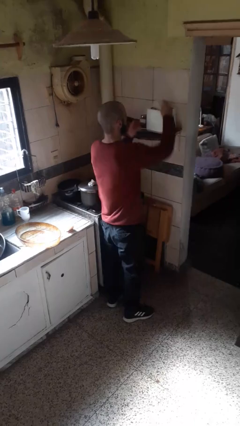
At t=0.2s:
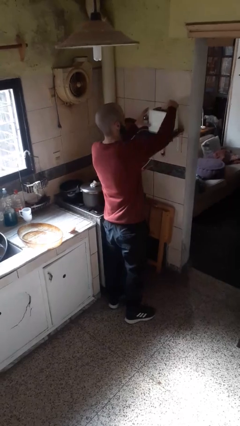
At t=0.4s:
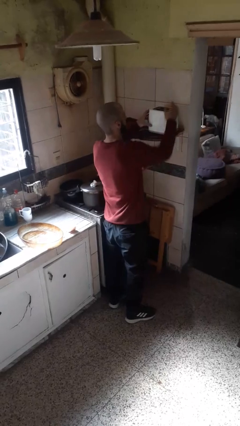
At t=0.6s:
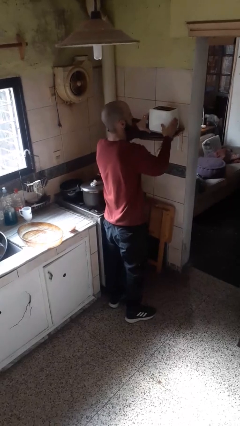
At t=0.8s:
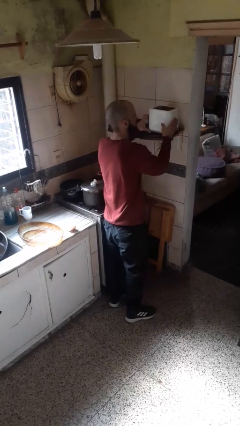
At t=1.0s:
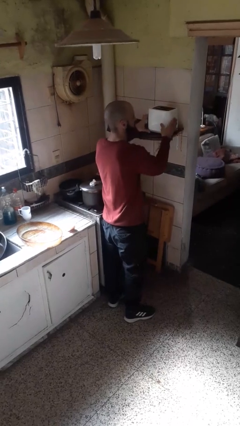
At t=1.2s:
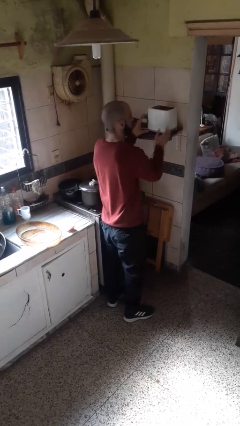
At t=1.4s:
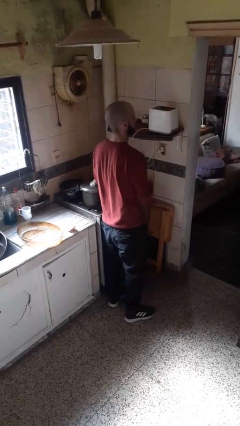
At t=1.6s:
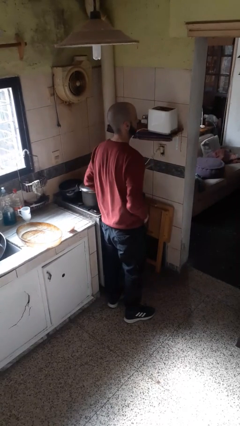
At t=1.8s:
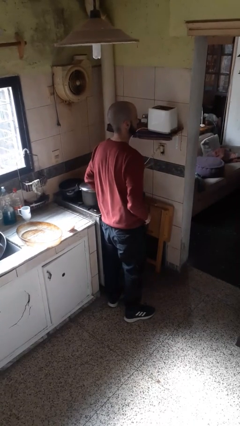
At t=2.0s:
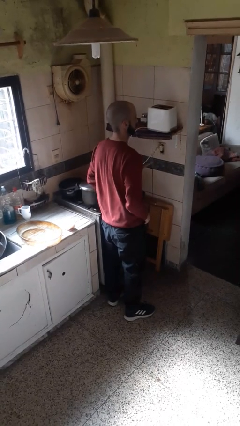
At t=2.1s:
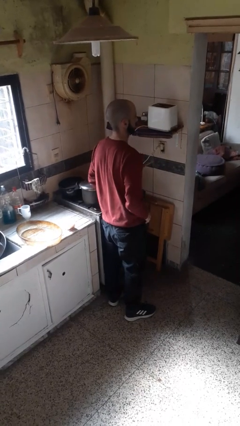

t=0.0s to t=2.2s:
person puts object into toaster

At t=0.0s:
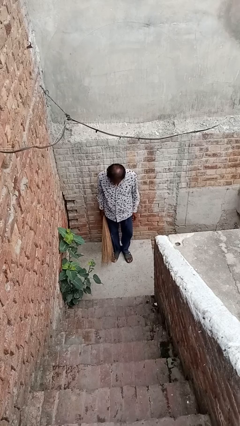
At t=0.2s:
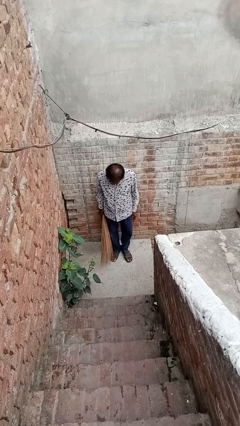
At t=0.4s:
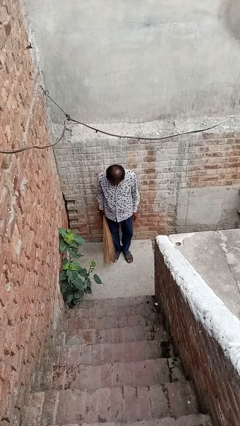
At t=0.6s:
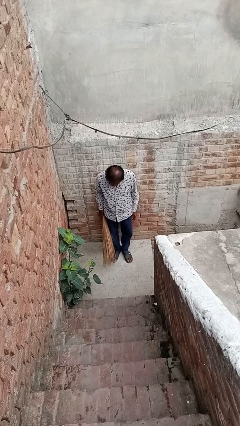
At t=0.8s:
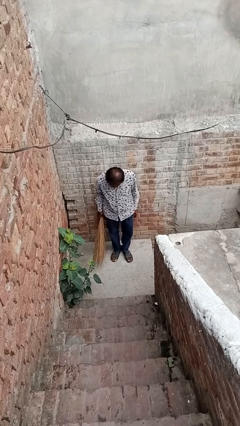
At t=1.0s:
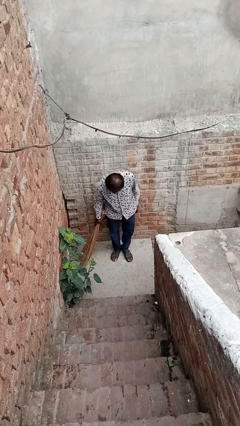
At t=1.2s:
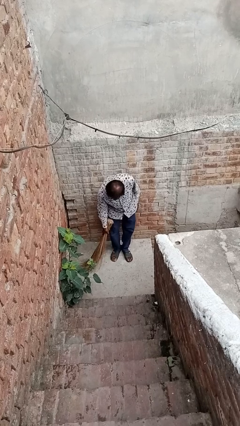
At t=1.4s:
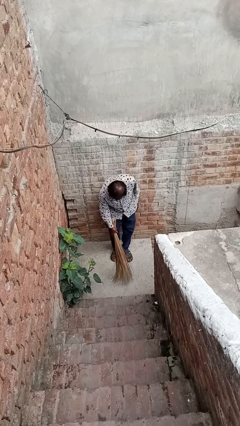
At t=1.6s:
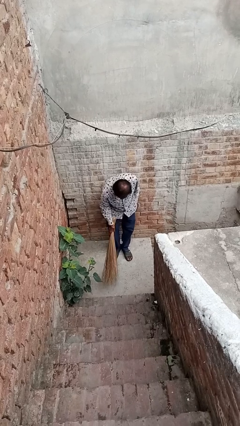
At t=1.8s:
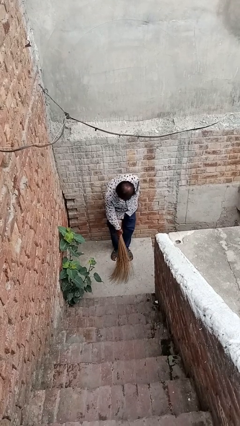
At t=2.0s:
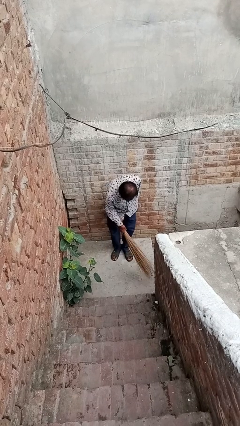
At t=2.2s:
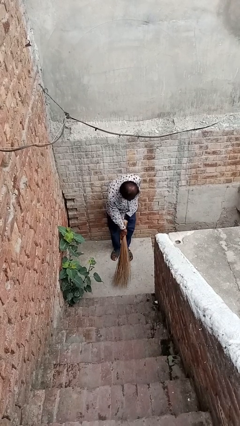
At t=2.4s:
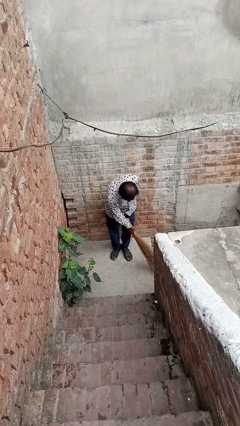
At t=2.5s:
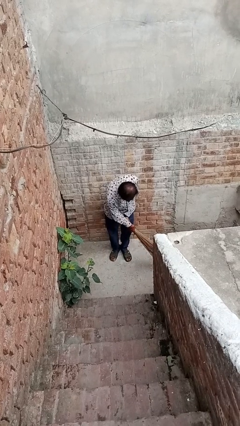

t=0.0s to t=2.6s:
person sweeps floor

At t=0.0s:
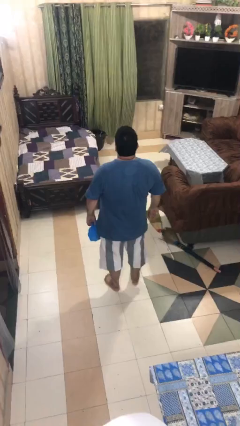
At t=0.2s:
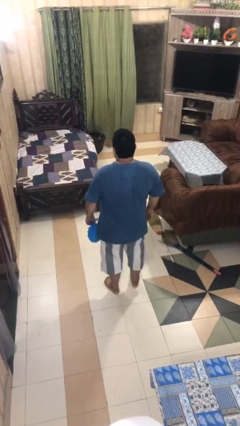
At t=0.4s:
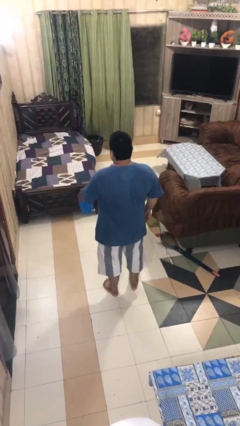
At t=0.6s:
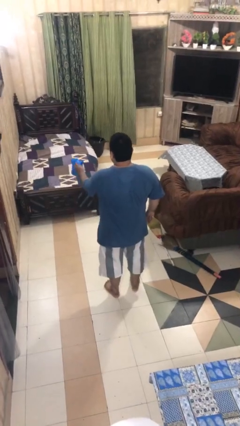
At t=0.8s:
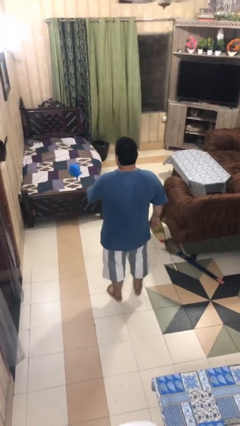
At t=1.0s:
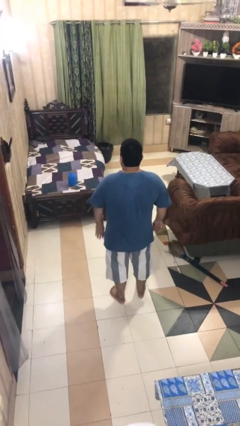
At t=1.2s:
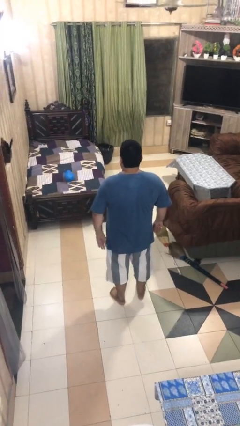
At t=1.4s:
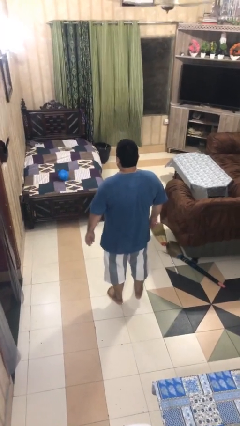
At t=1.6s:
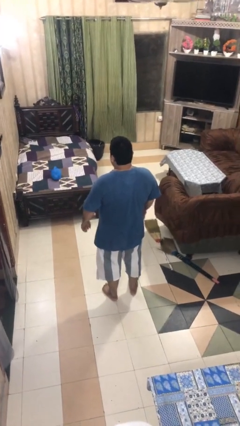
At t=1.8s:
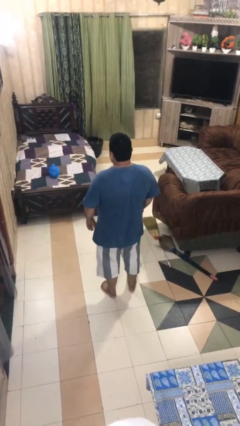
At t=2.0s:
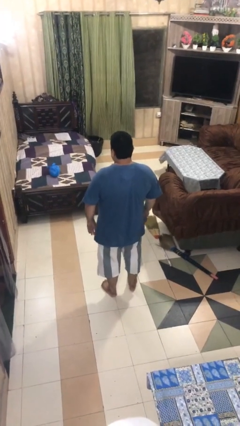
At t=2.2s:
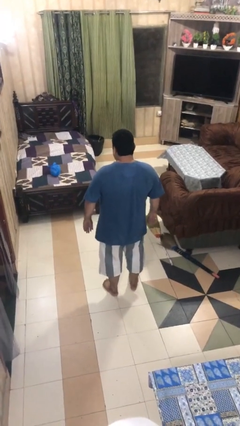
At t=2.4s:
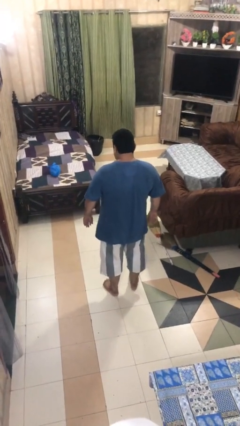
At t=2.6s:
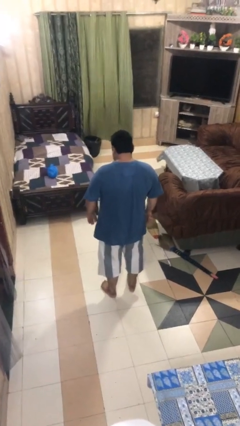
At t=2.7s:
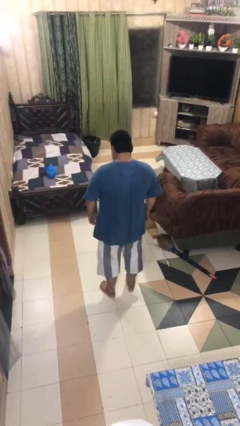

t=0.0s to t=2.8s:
person throws object on bed

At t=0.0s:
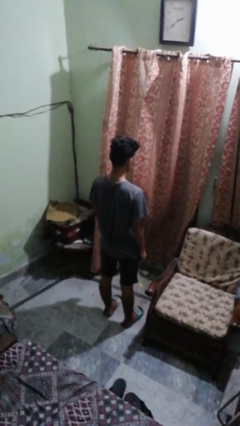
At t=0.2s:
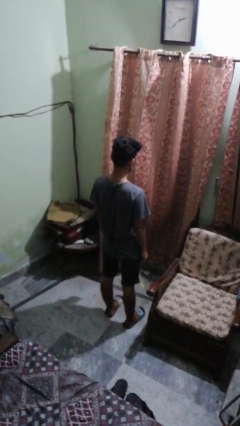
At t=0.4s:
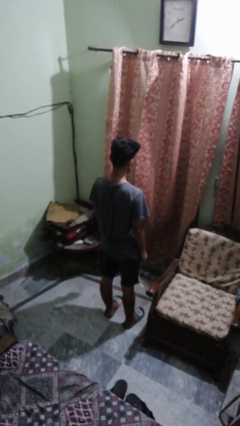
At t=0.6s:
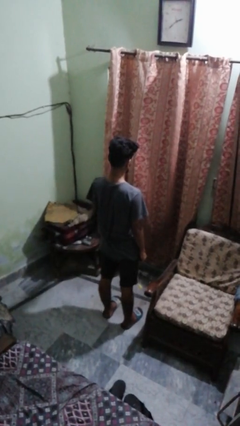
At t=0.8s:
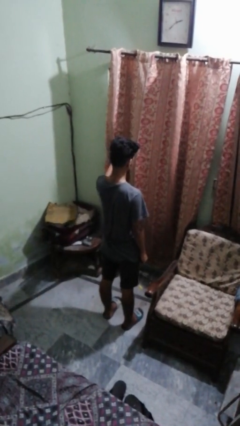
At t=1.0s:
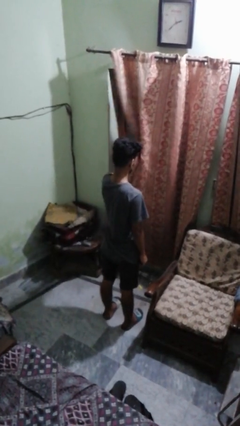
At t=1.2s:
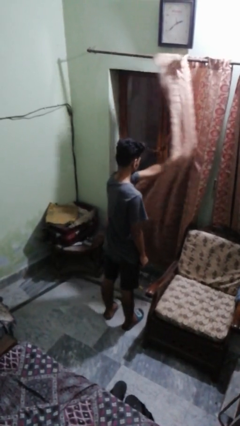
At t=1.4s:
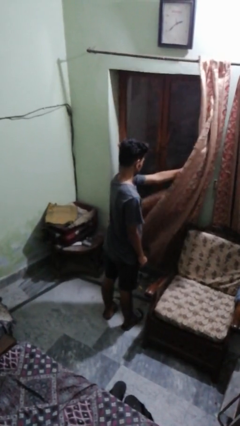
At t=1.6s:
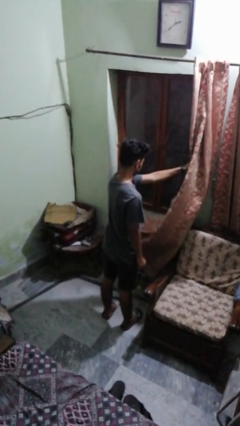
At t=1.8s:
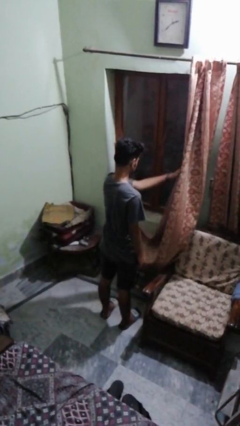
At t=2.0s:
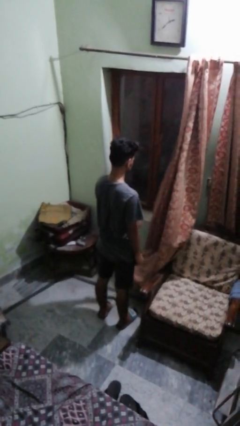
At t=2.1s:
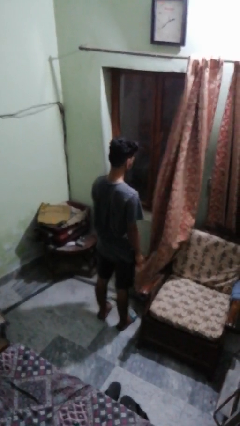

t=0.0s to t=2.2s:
person opens curtains

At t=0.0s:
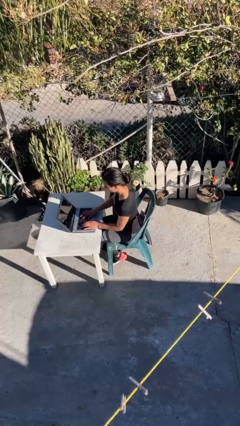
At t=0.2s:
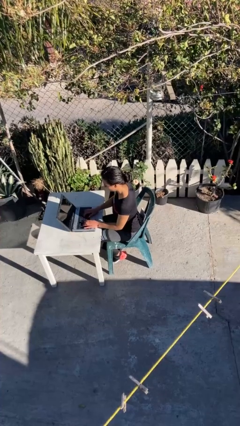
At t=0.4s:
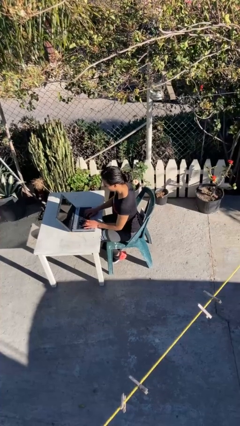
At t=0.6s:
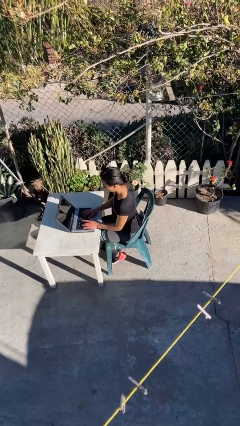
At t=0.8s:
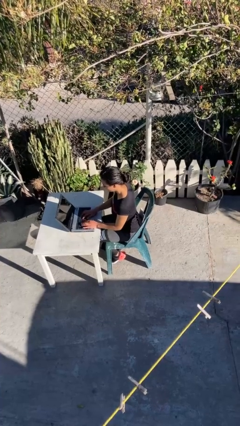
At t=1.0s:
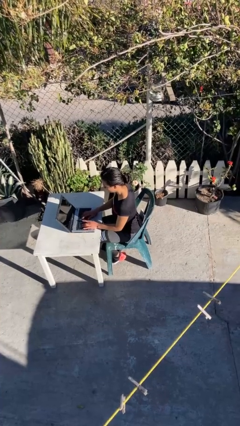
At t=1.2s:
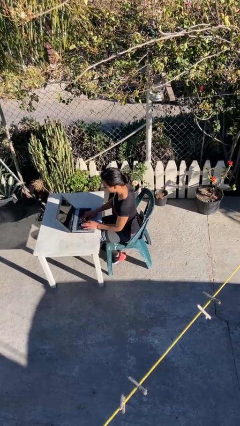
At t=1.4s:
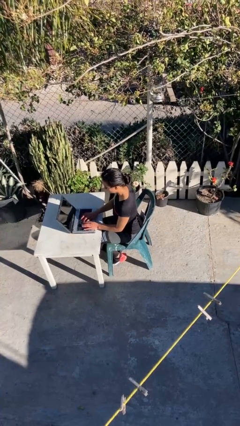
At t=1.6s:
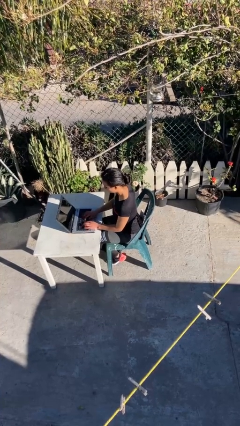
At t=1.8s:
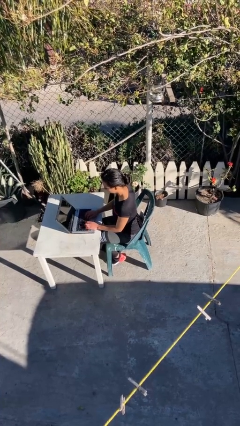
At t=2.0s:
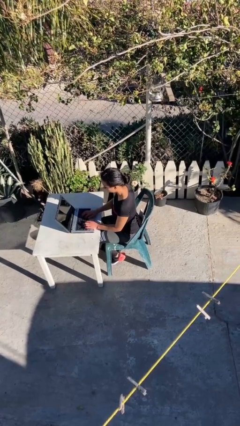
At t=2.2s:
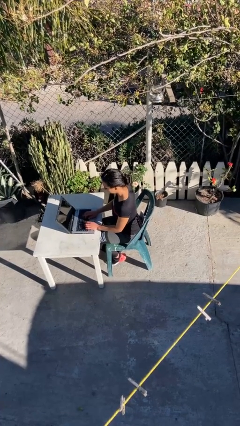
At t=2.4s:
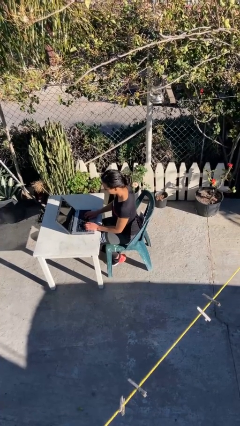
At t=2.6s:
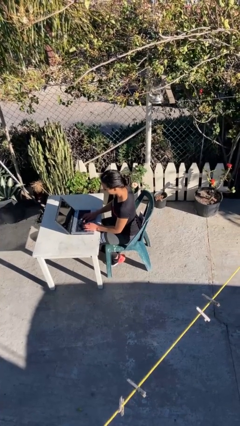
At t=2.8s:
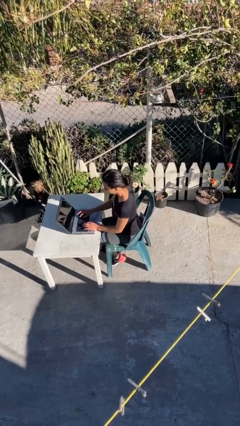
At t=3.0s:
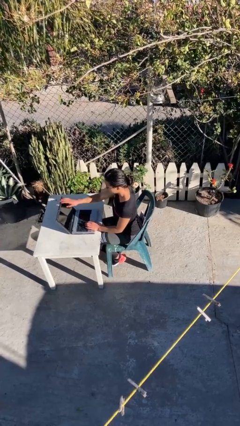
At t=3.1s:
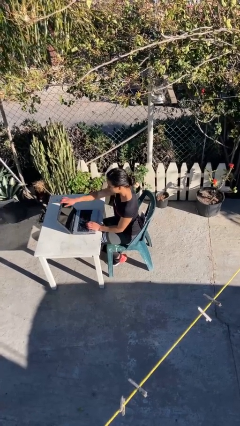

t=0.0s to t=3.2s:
person interacts with laptop

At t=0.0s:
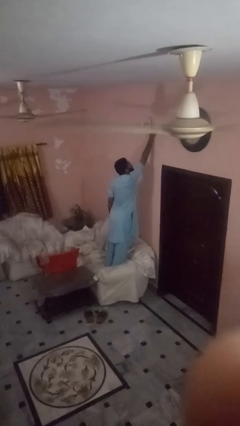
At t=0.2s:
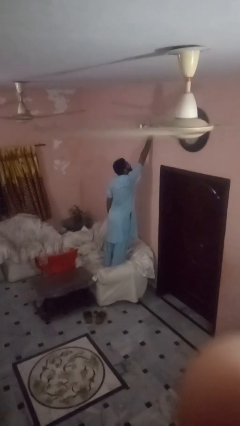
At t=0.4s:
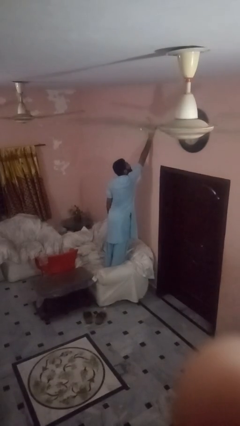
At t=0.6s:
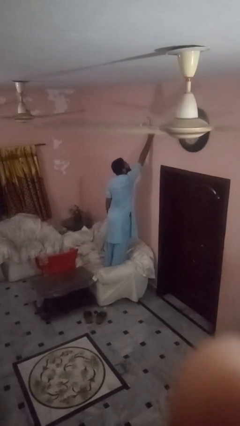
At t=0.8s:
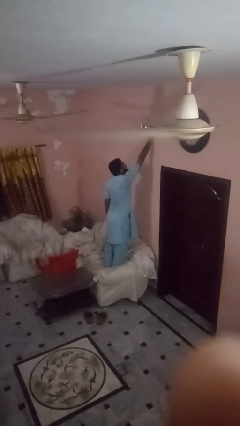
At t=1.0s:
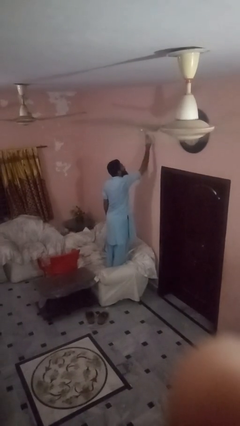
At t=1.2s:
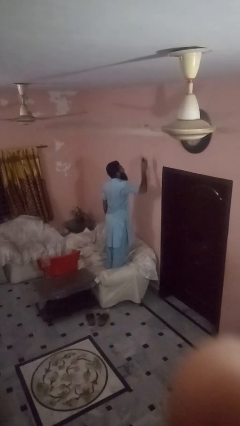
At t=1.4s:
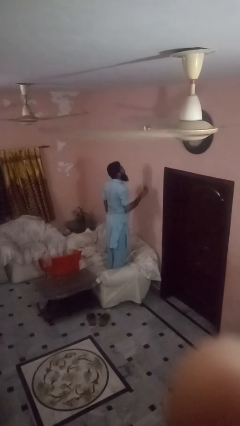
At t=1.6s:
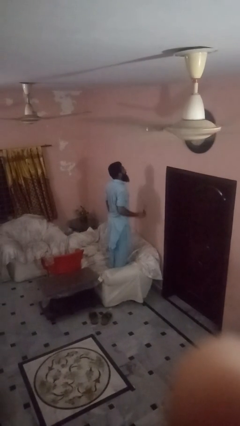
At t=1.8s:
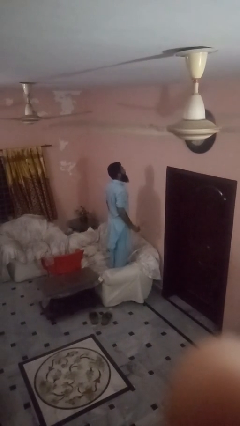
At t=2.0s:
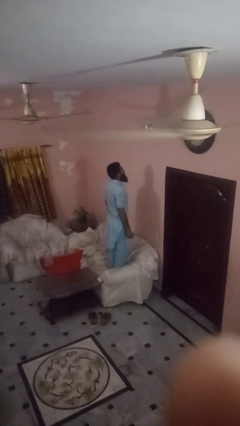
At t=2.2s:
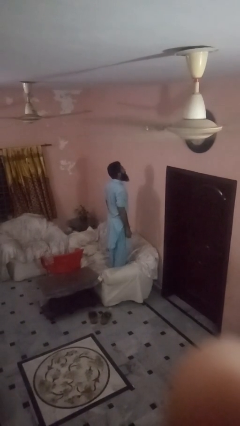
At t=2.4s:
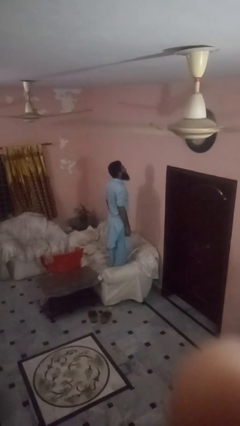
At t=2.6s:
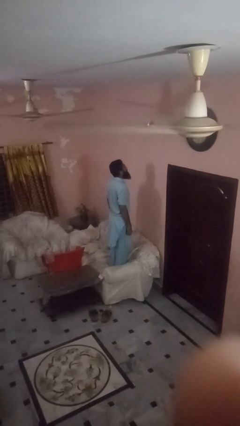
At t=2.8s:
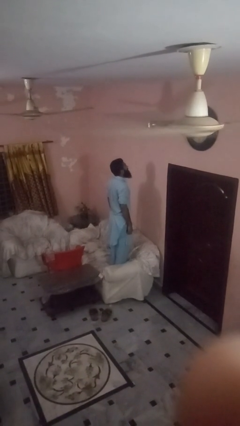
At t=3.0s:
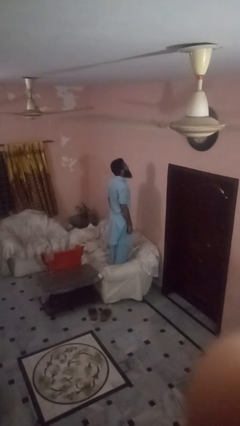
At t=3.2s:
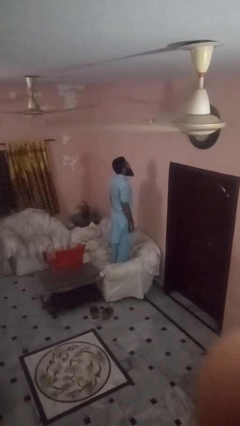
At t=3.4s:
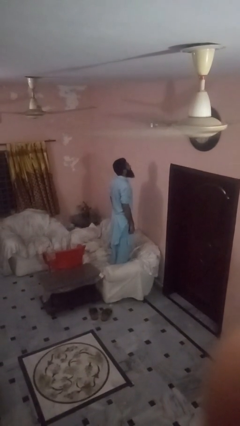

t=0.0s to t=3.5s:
person takes down smoke detector

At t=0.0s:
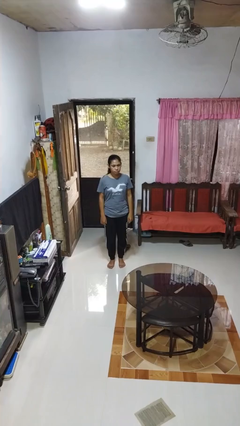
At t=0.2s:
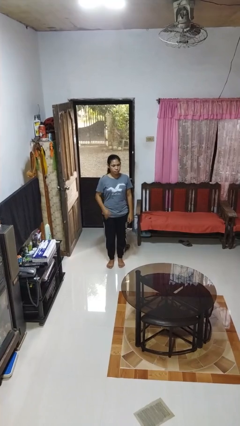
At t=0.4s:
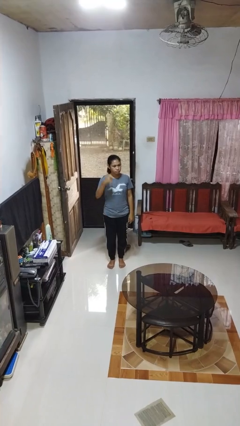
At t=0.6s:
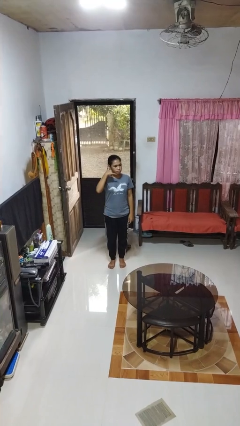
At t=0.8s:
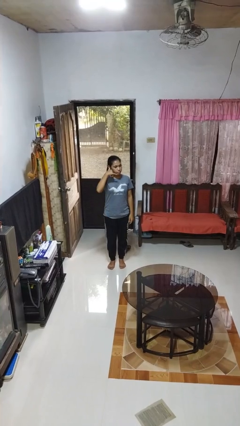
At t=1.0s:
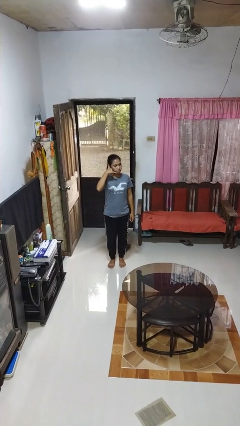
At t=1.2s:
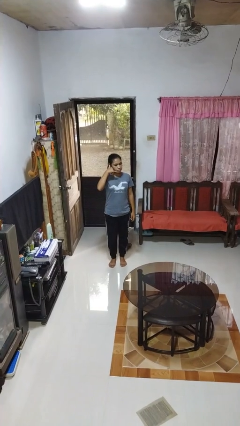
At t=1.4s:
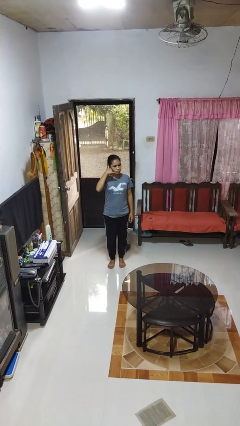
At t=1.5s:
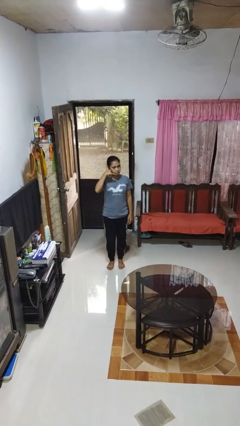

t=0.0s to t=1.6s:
person gestures call me
